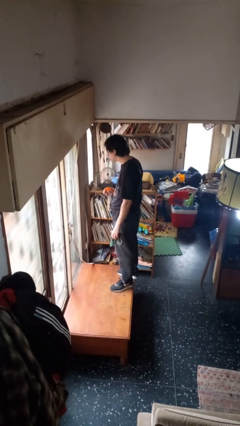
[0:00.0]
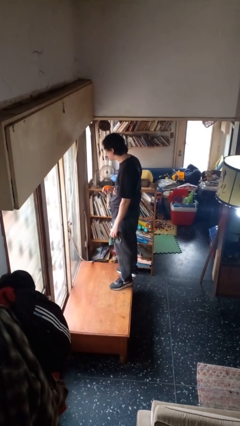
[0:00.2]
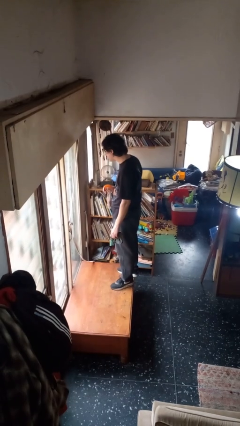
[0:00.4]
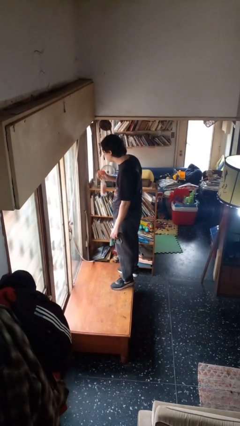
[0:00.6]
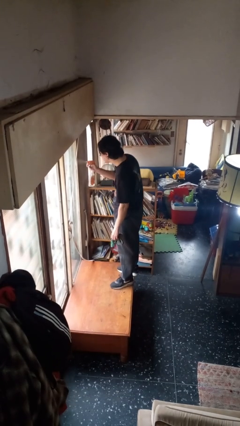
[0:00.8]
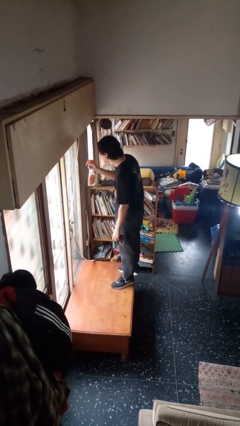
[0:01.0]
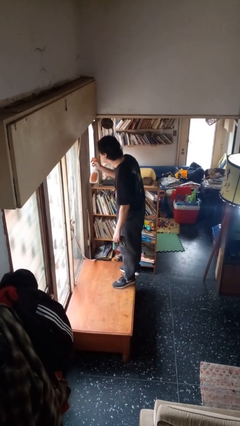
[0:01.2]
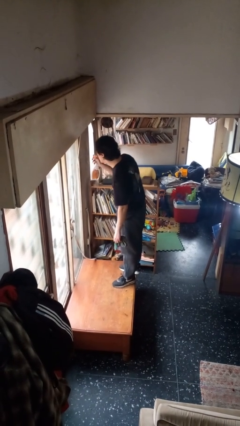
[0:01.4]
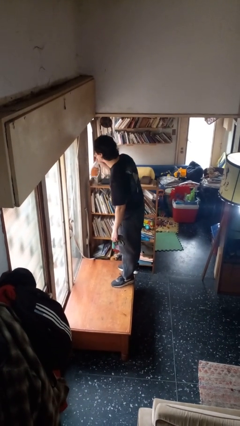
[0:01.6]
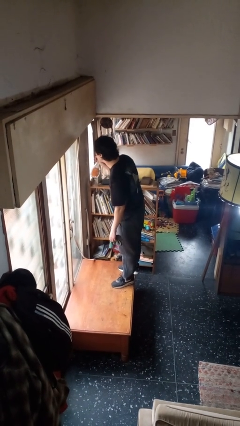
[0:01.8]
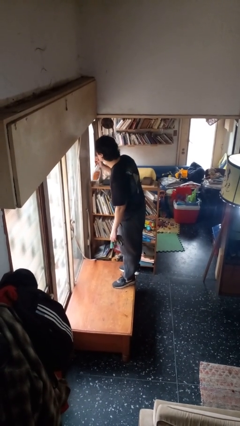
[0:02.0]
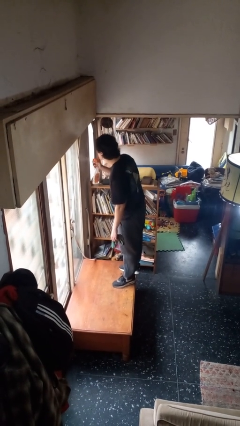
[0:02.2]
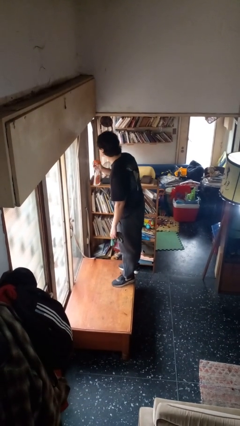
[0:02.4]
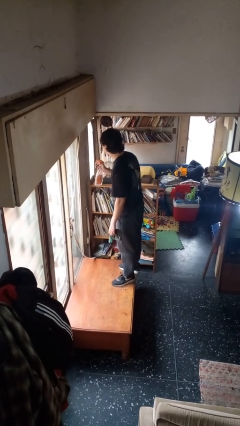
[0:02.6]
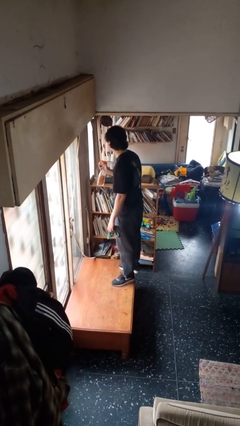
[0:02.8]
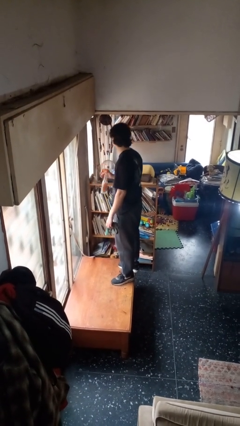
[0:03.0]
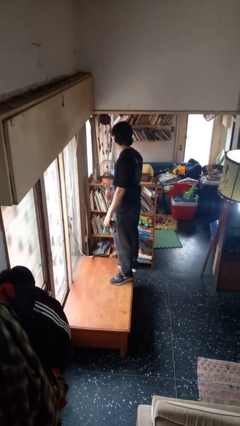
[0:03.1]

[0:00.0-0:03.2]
person sprays from bottle

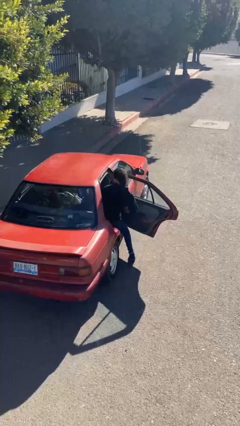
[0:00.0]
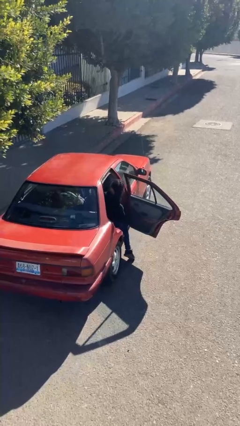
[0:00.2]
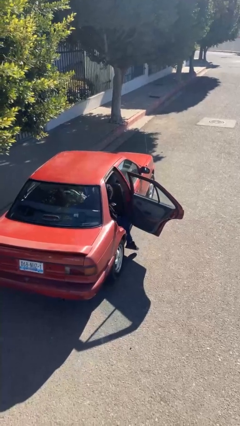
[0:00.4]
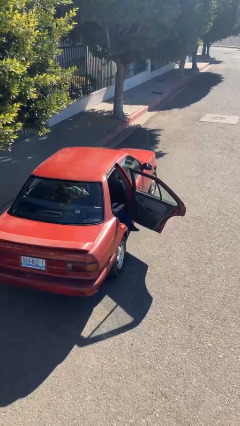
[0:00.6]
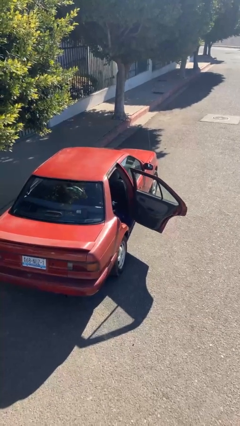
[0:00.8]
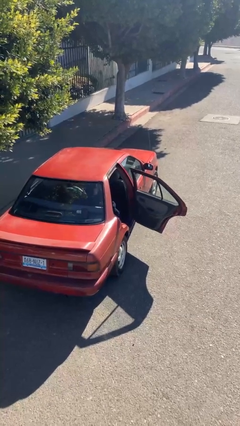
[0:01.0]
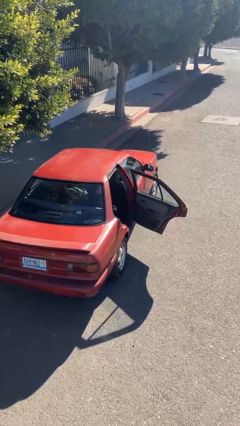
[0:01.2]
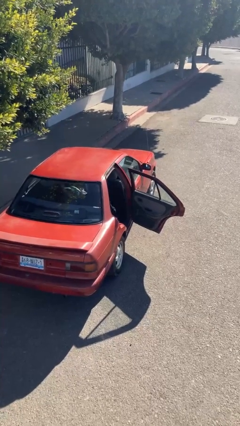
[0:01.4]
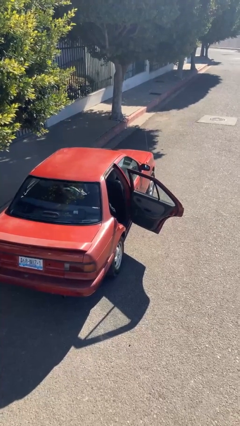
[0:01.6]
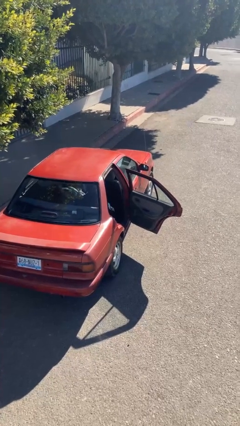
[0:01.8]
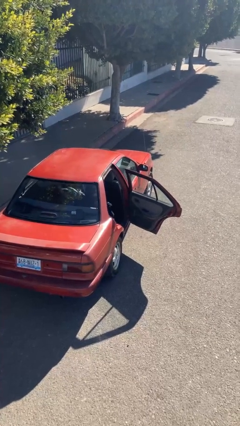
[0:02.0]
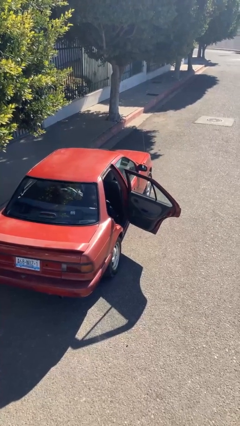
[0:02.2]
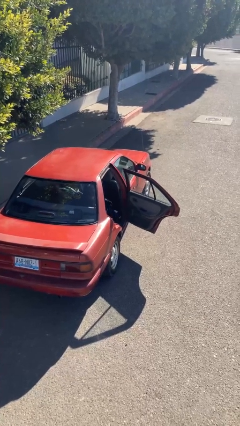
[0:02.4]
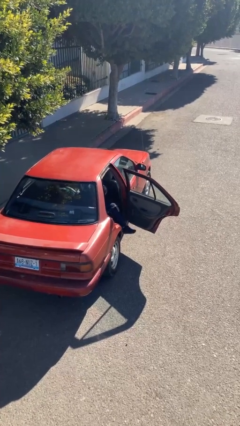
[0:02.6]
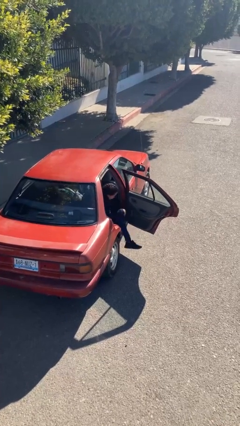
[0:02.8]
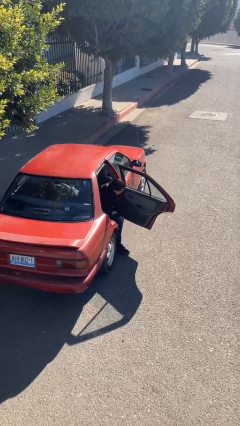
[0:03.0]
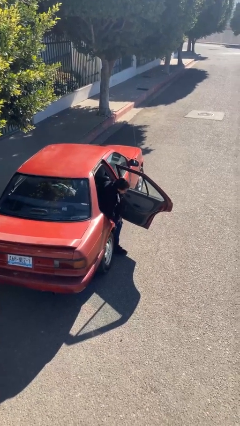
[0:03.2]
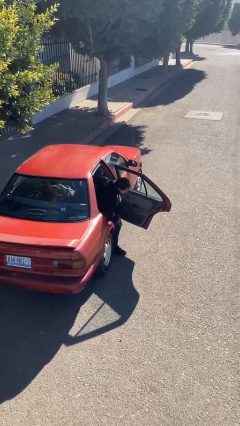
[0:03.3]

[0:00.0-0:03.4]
person enters car

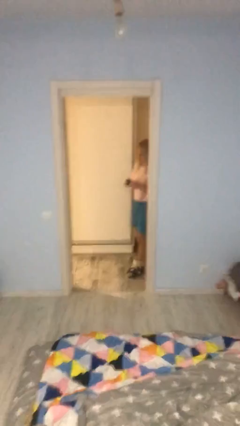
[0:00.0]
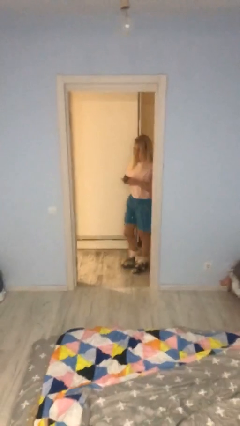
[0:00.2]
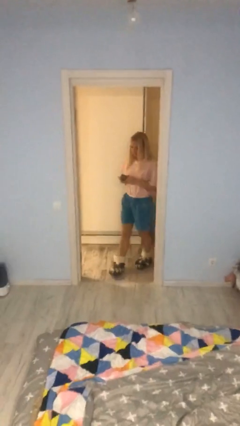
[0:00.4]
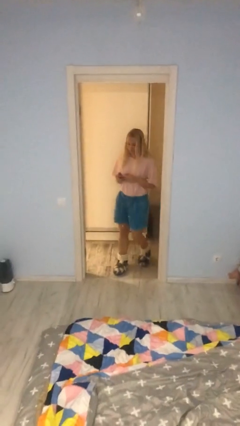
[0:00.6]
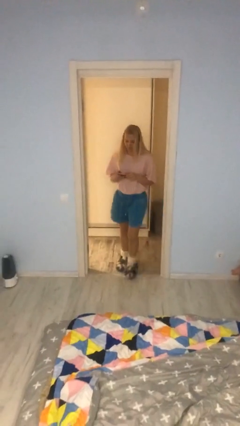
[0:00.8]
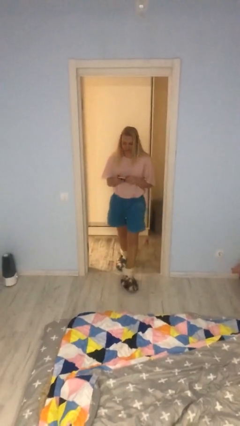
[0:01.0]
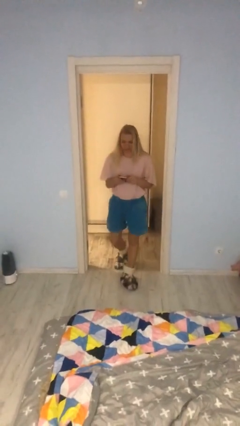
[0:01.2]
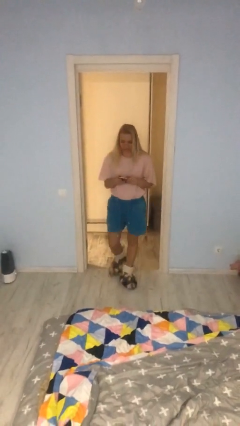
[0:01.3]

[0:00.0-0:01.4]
person enters scene through structure

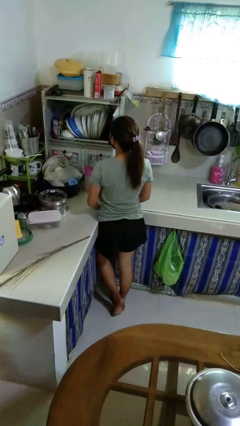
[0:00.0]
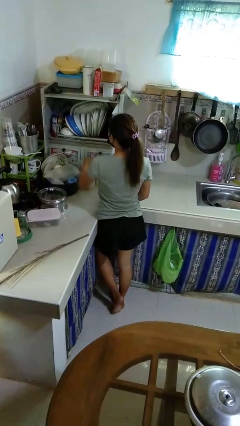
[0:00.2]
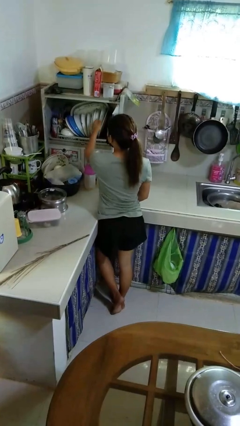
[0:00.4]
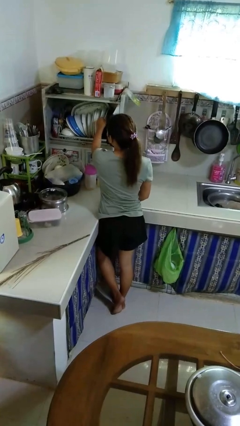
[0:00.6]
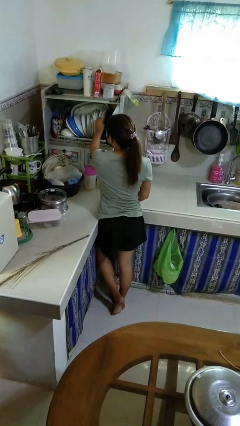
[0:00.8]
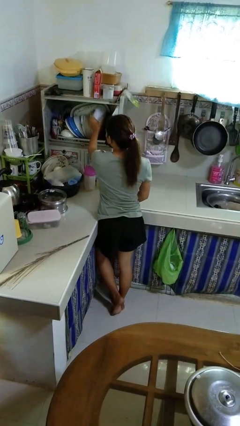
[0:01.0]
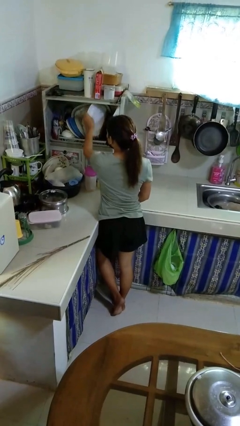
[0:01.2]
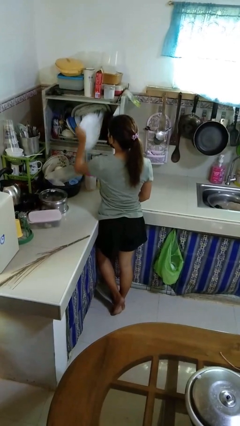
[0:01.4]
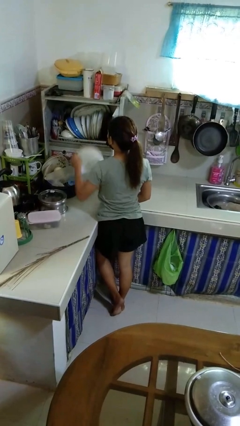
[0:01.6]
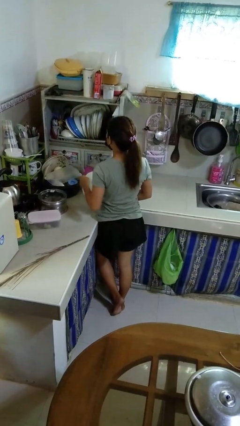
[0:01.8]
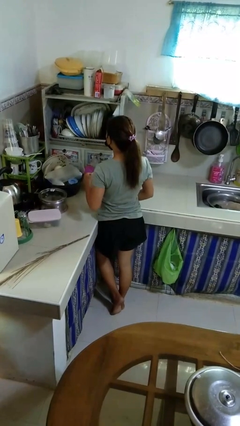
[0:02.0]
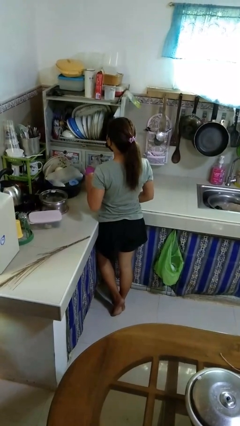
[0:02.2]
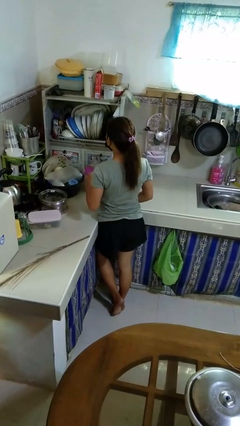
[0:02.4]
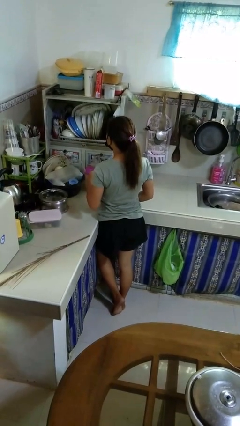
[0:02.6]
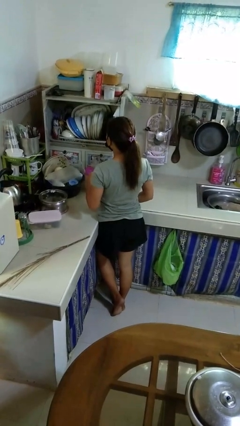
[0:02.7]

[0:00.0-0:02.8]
person takes object from kitchen drawer

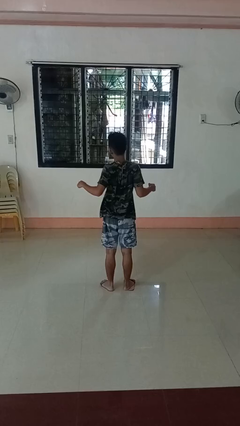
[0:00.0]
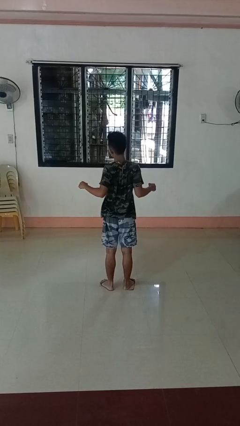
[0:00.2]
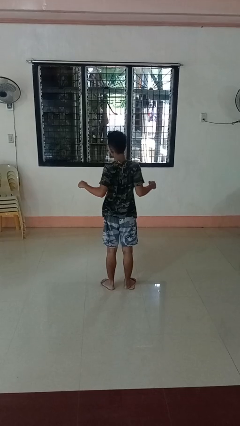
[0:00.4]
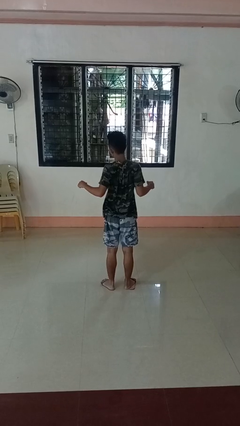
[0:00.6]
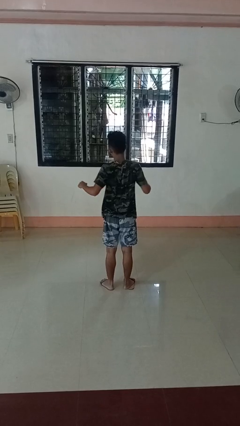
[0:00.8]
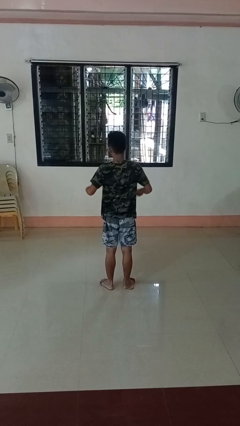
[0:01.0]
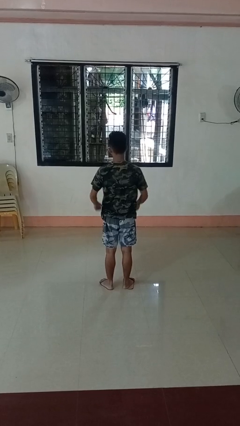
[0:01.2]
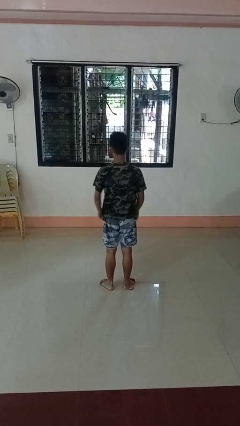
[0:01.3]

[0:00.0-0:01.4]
person stretches back

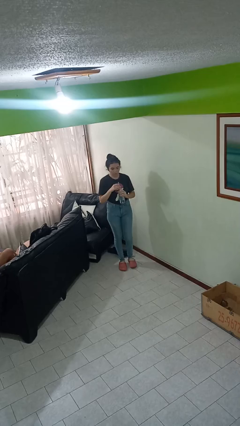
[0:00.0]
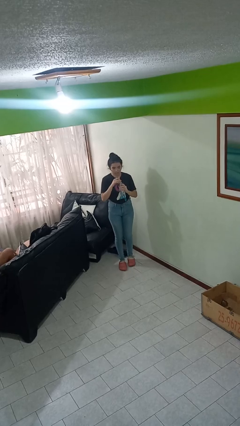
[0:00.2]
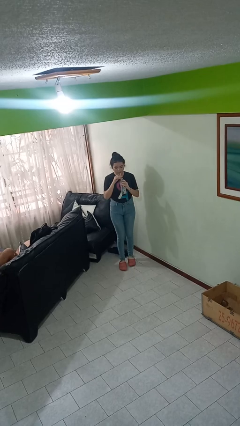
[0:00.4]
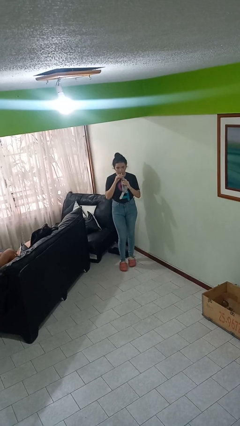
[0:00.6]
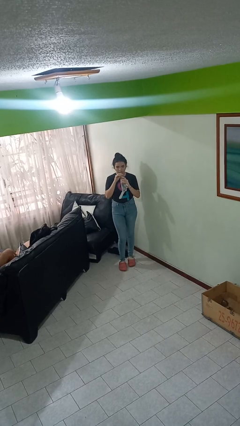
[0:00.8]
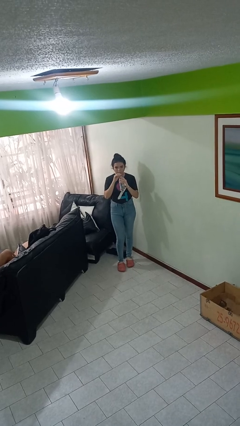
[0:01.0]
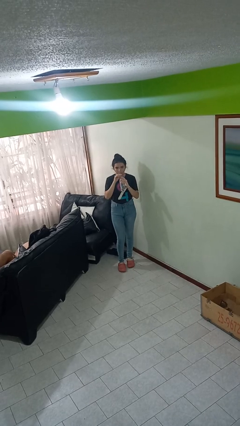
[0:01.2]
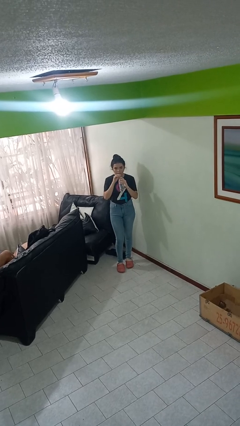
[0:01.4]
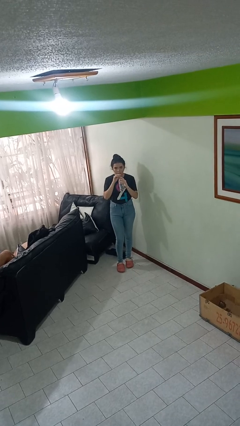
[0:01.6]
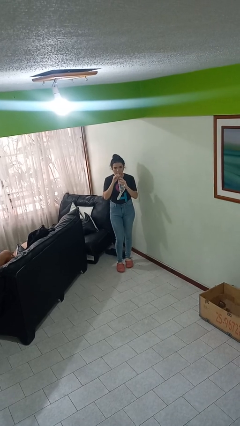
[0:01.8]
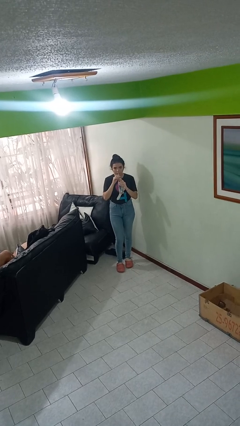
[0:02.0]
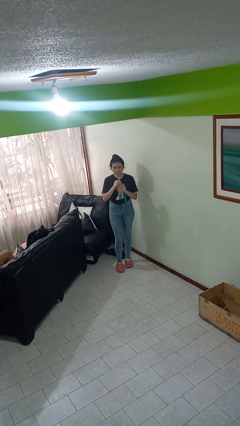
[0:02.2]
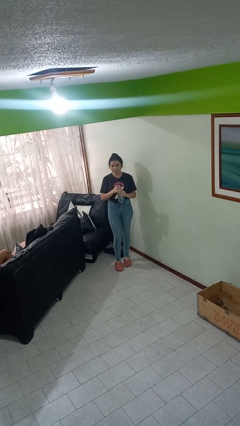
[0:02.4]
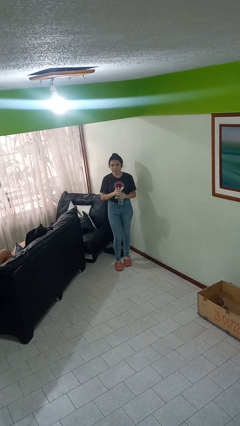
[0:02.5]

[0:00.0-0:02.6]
person drinks from straw

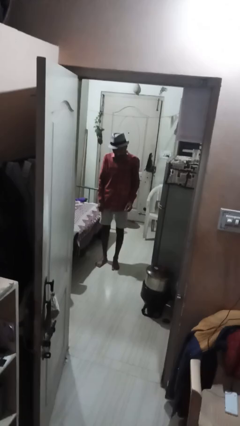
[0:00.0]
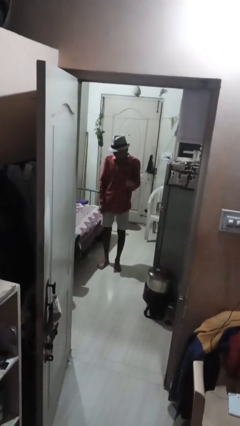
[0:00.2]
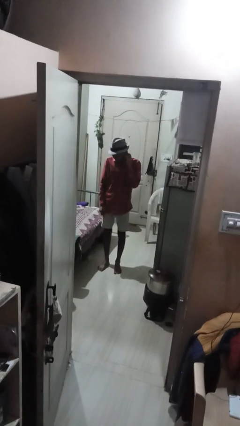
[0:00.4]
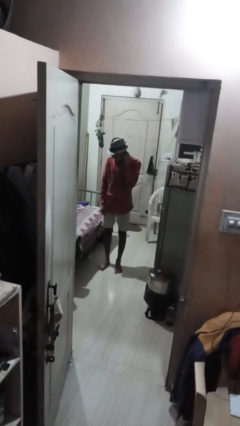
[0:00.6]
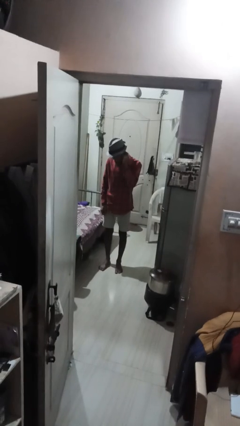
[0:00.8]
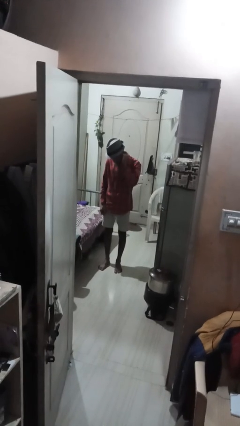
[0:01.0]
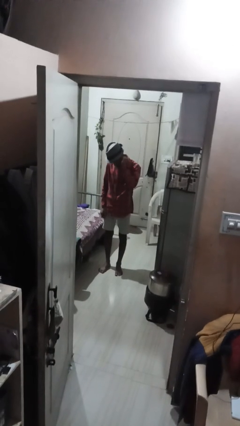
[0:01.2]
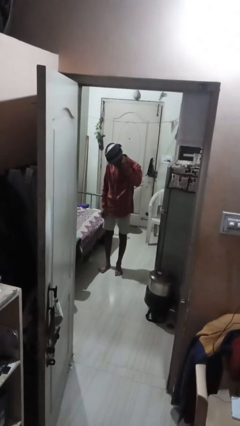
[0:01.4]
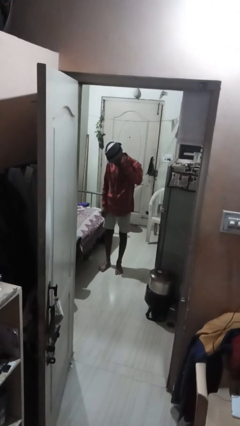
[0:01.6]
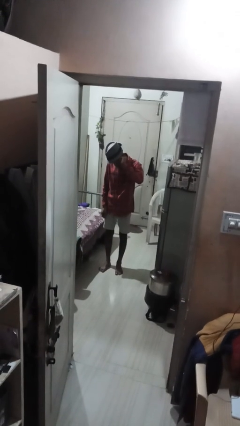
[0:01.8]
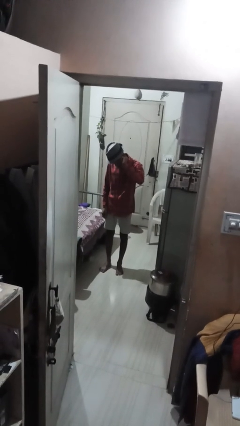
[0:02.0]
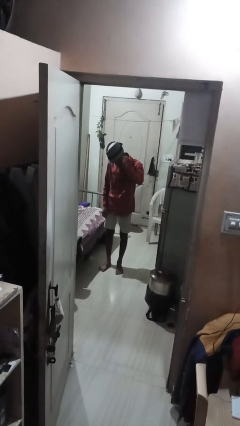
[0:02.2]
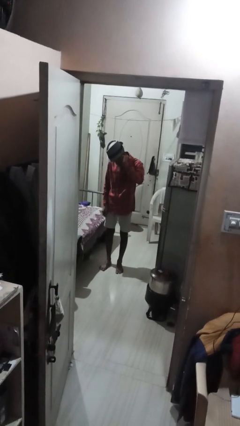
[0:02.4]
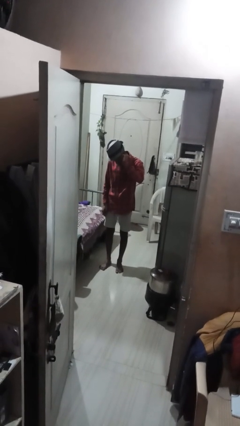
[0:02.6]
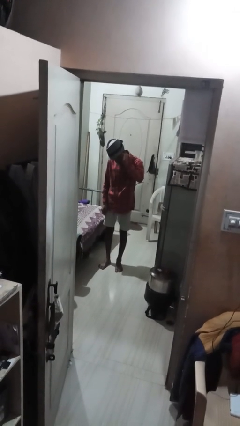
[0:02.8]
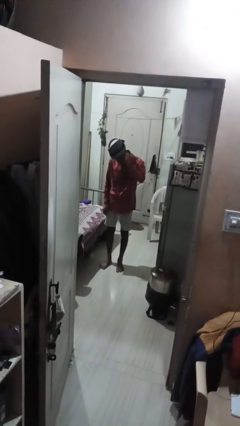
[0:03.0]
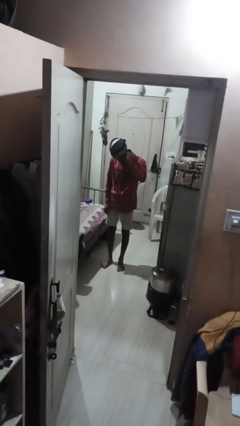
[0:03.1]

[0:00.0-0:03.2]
person touches earlobe
